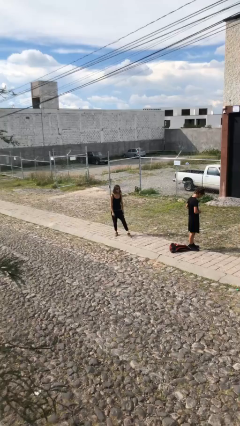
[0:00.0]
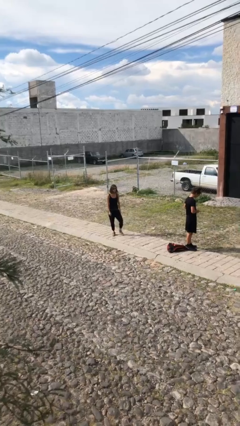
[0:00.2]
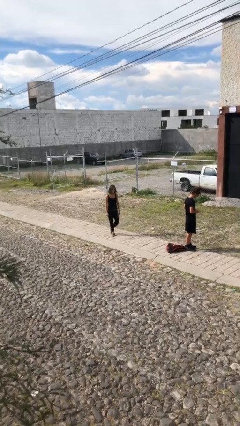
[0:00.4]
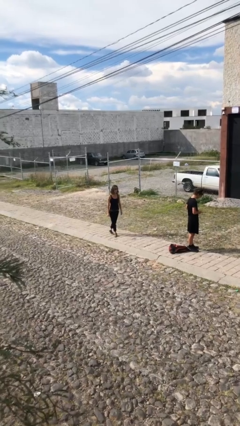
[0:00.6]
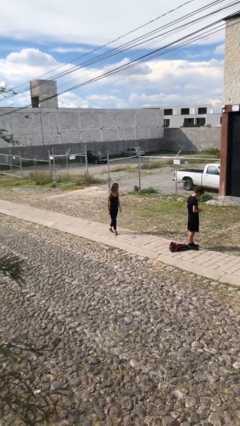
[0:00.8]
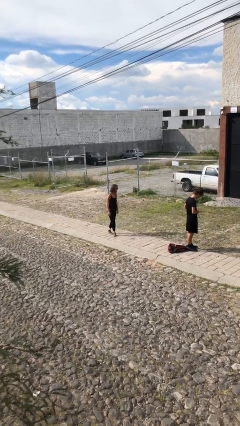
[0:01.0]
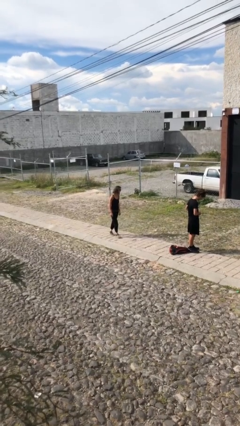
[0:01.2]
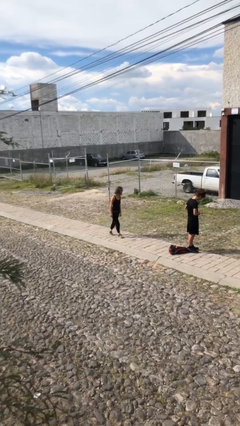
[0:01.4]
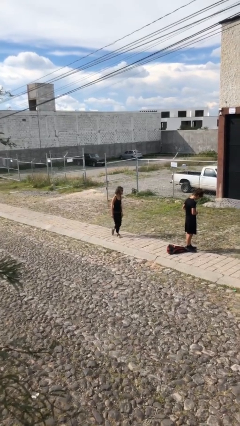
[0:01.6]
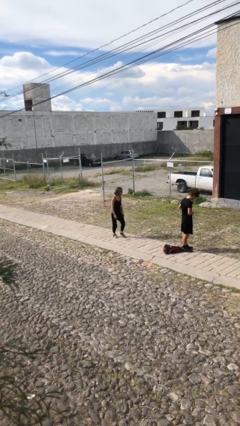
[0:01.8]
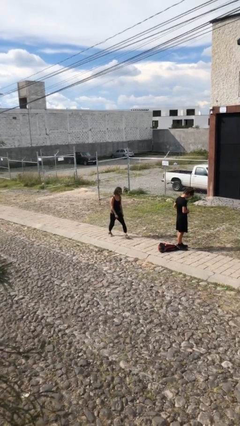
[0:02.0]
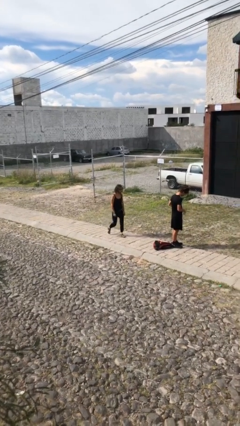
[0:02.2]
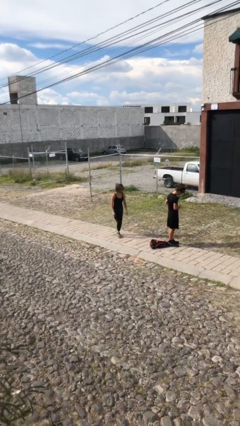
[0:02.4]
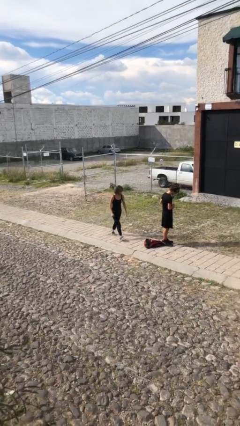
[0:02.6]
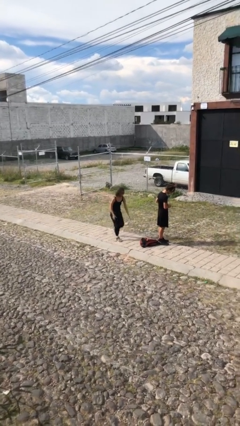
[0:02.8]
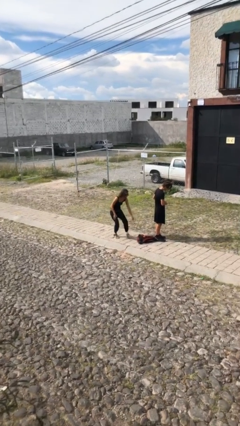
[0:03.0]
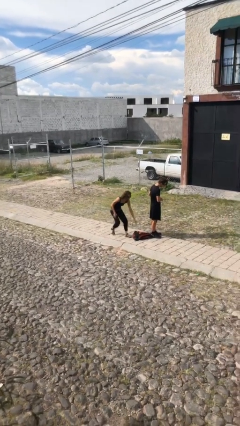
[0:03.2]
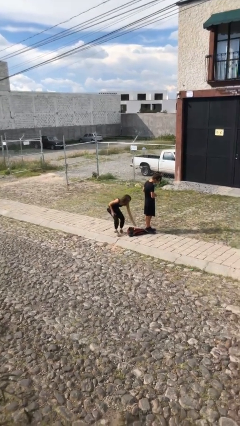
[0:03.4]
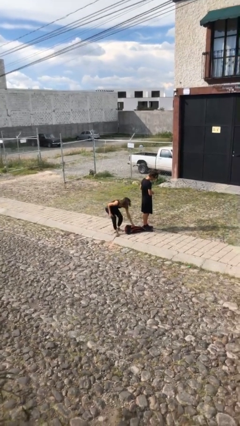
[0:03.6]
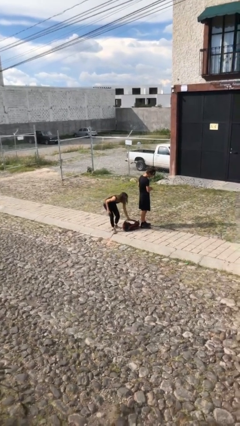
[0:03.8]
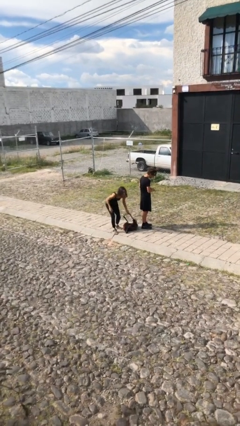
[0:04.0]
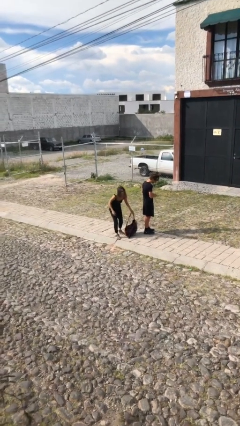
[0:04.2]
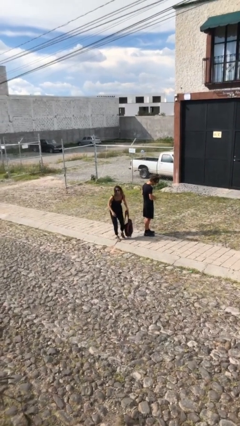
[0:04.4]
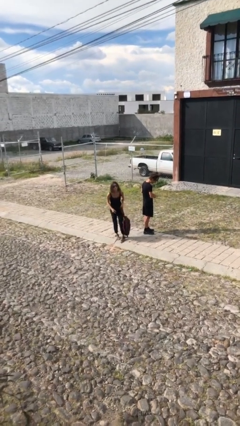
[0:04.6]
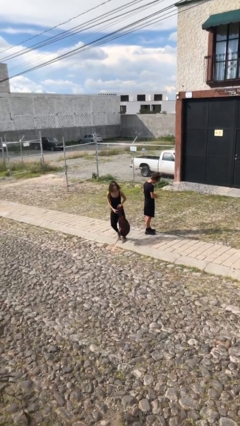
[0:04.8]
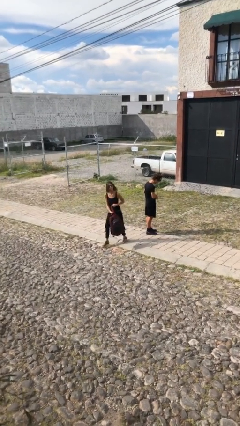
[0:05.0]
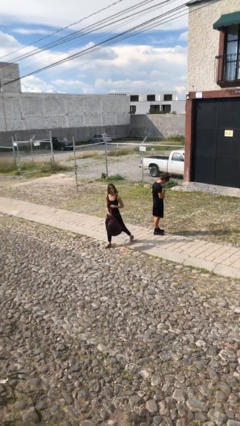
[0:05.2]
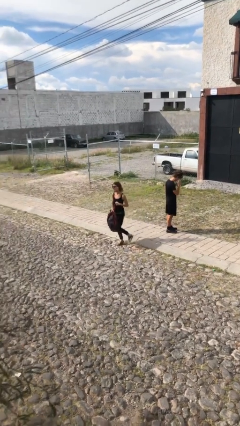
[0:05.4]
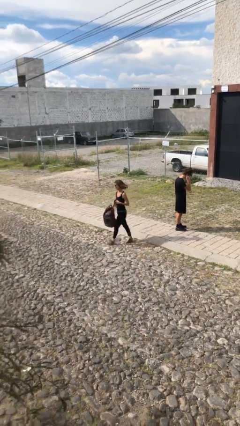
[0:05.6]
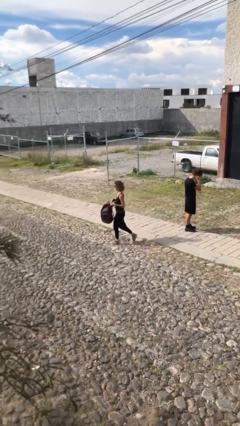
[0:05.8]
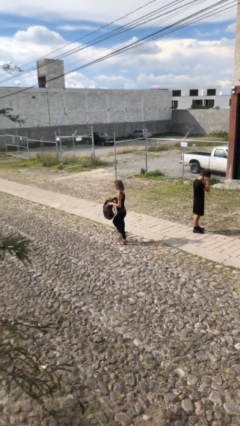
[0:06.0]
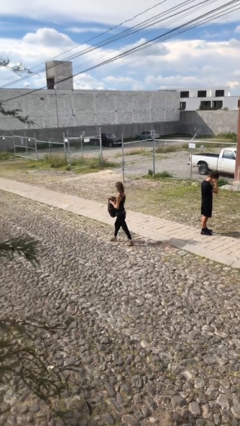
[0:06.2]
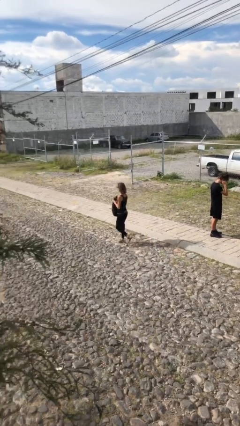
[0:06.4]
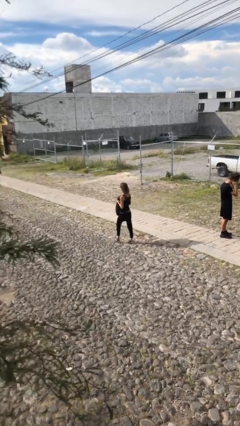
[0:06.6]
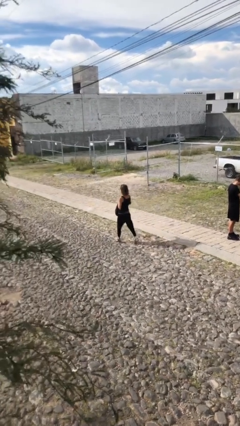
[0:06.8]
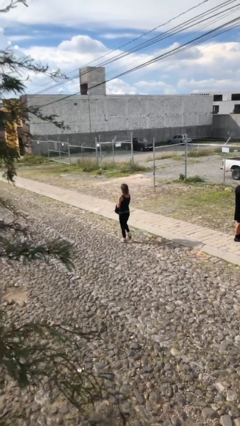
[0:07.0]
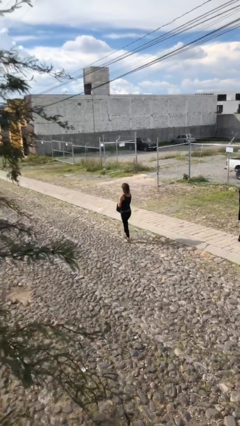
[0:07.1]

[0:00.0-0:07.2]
person steals object from person

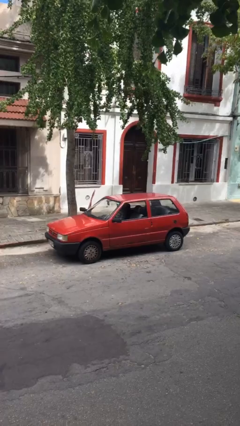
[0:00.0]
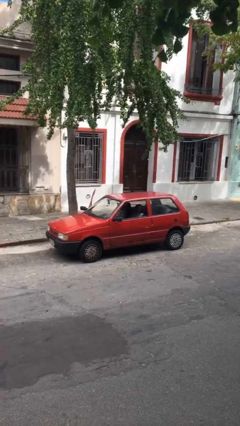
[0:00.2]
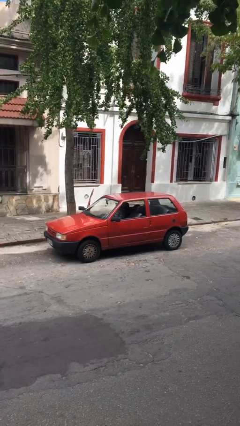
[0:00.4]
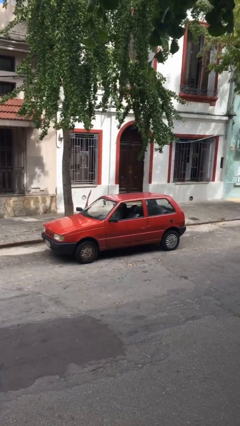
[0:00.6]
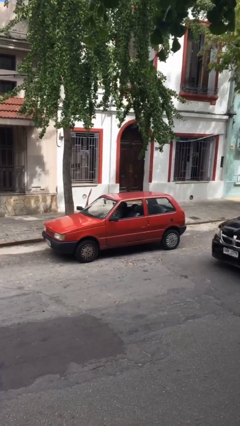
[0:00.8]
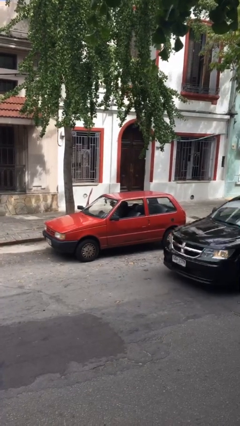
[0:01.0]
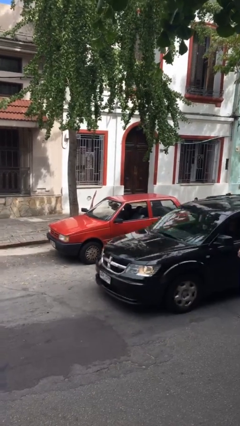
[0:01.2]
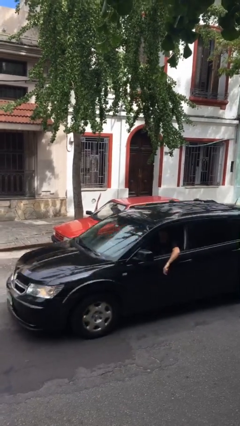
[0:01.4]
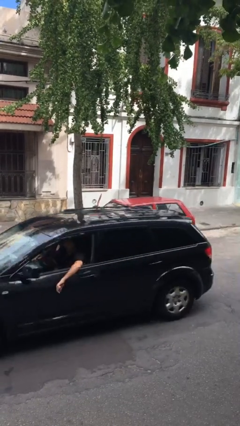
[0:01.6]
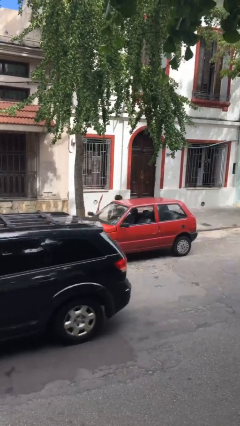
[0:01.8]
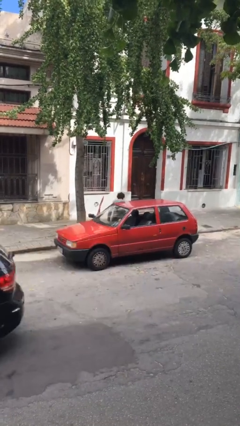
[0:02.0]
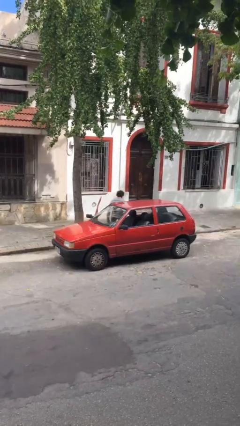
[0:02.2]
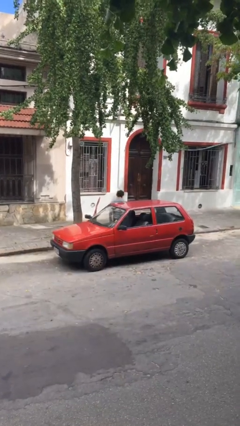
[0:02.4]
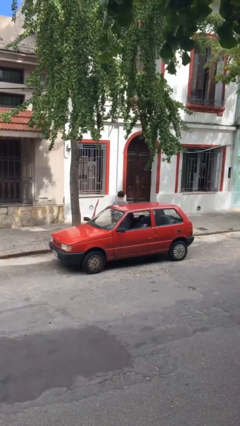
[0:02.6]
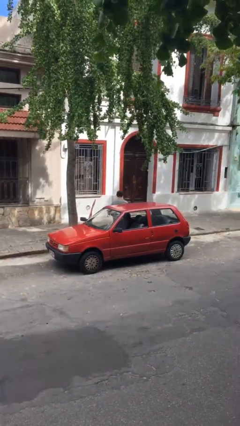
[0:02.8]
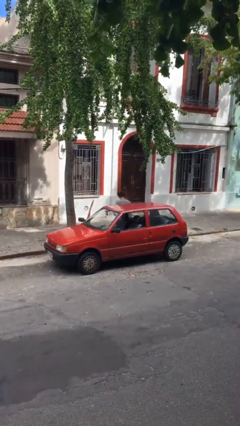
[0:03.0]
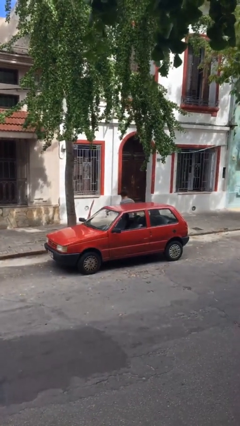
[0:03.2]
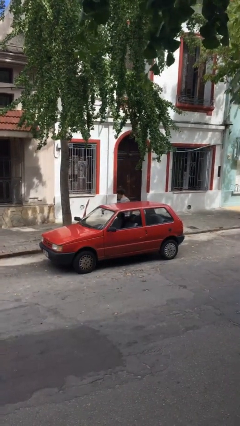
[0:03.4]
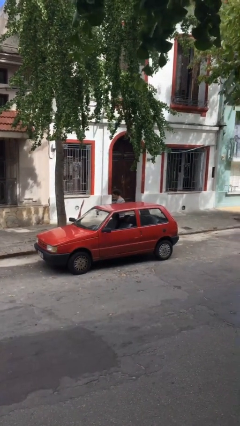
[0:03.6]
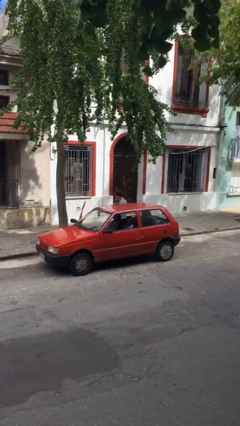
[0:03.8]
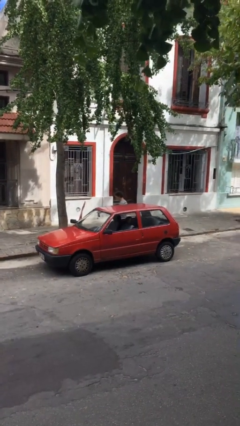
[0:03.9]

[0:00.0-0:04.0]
person exits car

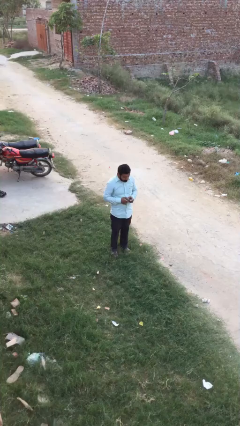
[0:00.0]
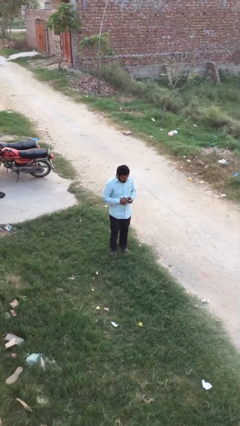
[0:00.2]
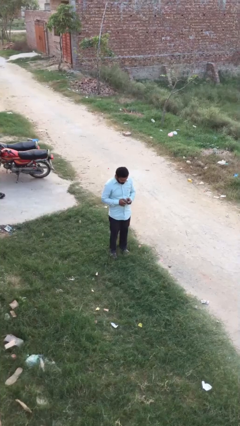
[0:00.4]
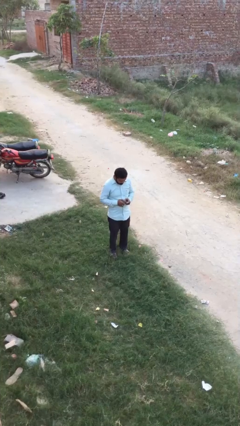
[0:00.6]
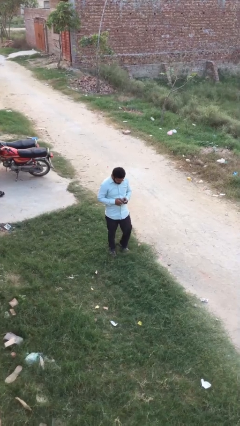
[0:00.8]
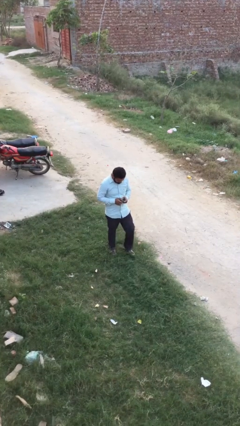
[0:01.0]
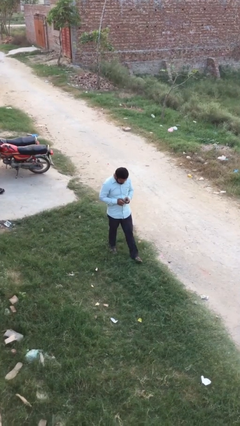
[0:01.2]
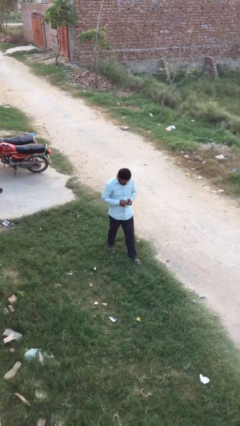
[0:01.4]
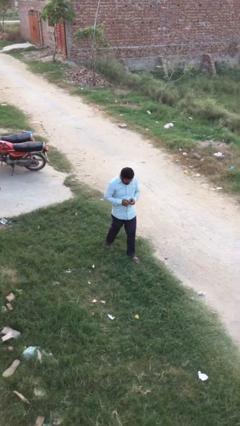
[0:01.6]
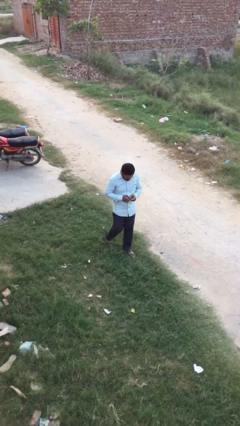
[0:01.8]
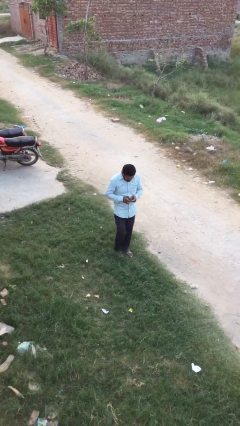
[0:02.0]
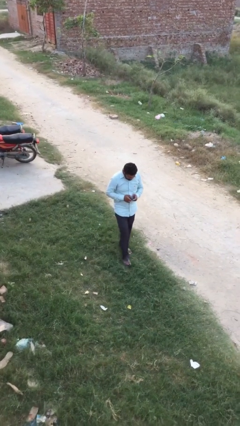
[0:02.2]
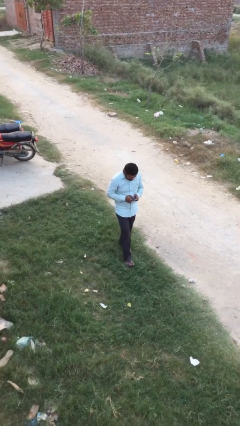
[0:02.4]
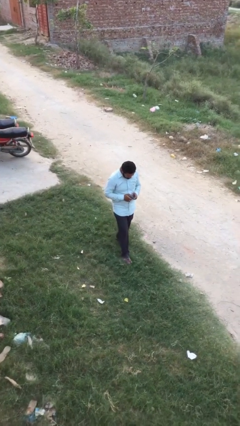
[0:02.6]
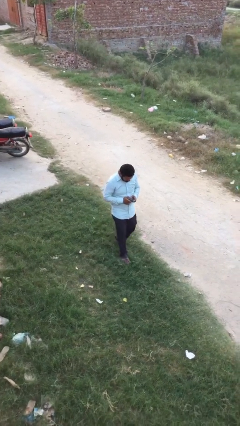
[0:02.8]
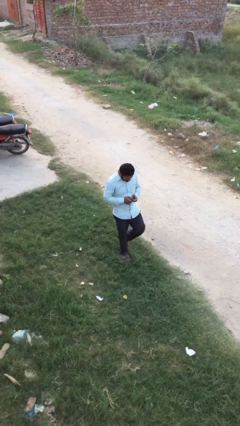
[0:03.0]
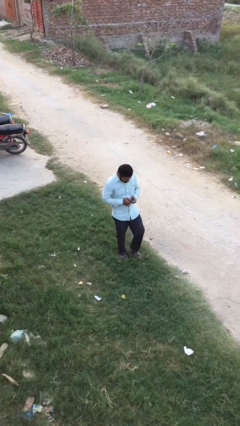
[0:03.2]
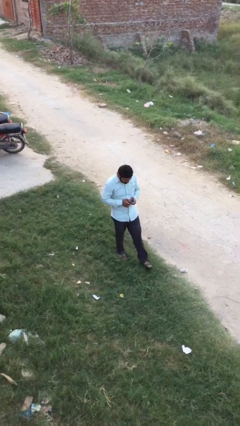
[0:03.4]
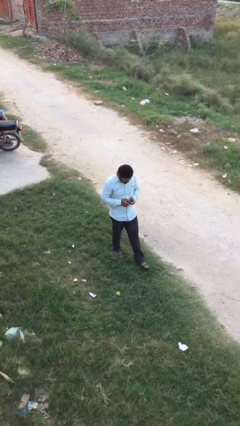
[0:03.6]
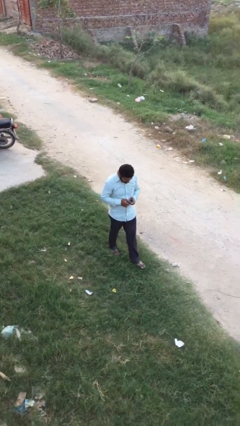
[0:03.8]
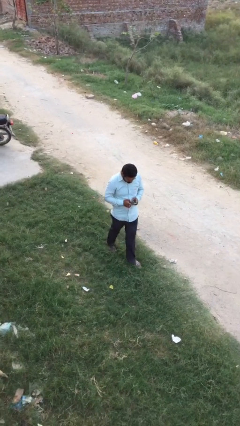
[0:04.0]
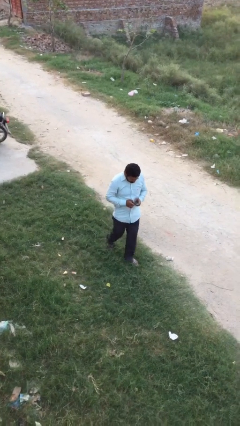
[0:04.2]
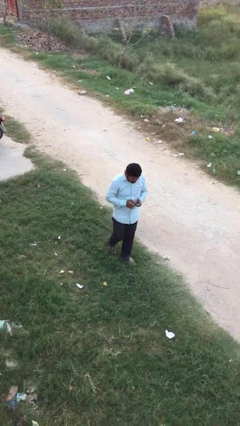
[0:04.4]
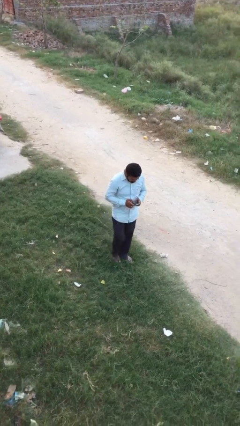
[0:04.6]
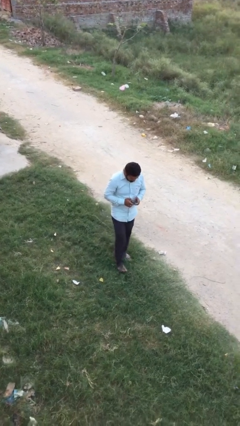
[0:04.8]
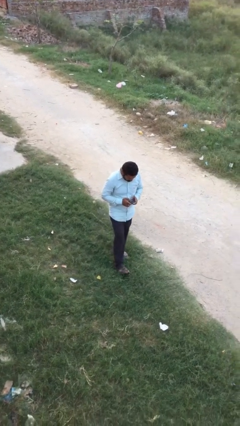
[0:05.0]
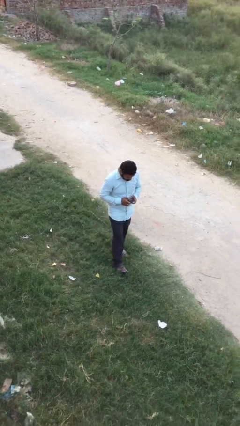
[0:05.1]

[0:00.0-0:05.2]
person texts on phone

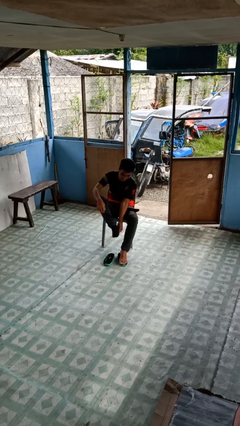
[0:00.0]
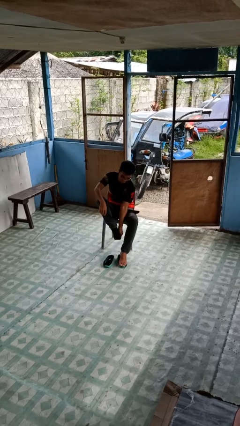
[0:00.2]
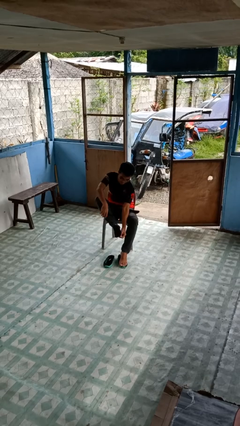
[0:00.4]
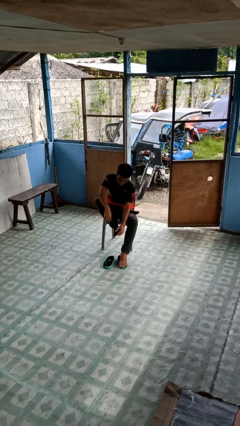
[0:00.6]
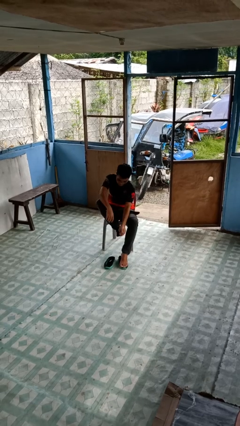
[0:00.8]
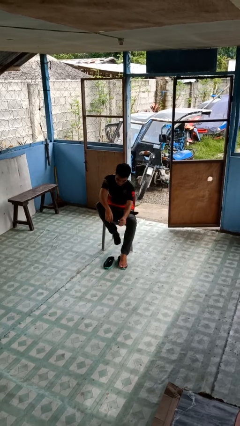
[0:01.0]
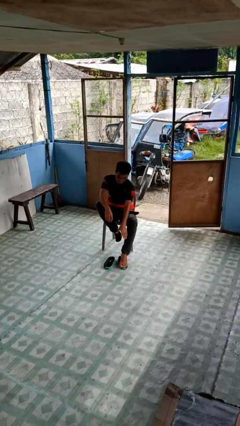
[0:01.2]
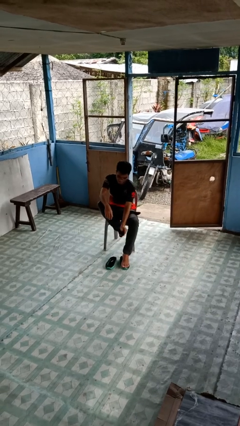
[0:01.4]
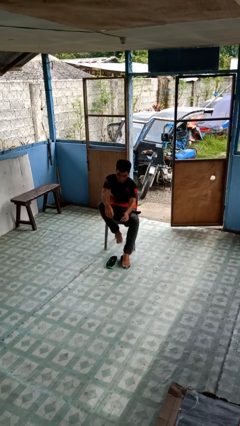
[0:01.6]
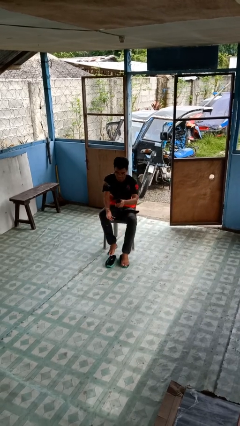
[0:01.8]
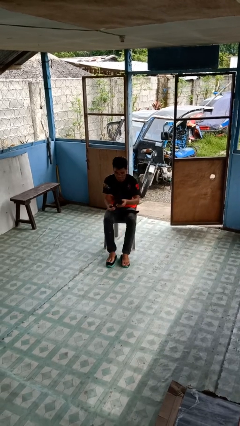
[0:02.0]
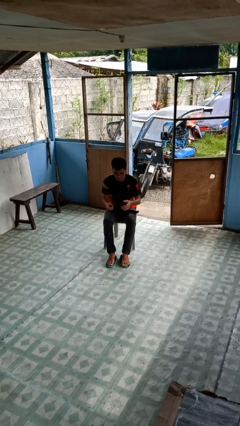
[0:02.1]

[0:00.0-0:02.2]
person takes off socks
